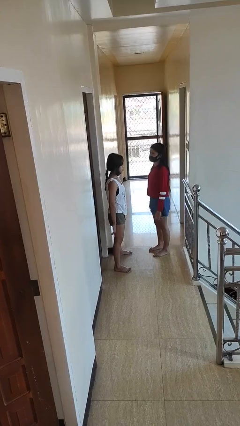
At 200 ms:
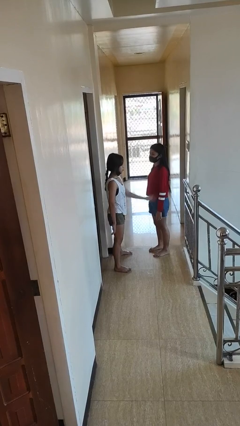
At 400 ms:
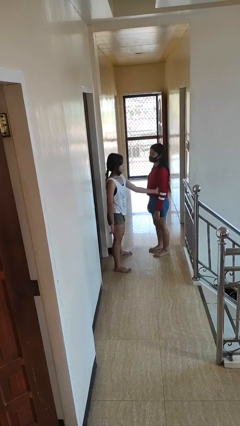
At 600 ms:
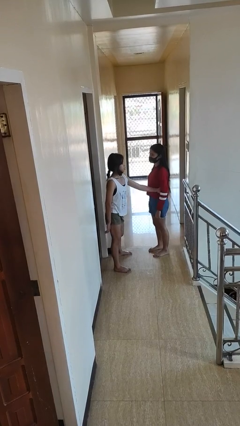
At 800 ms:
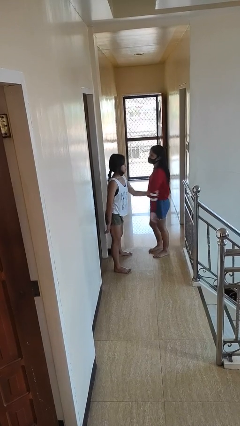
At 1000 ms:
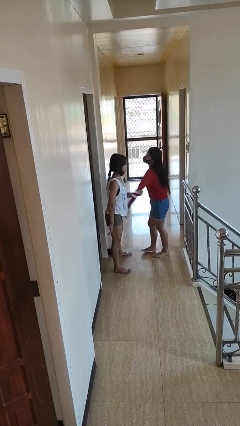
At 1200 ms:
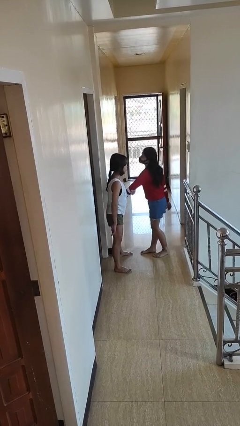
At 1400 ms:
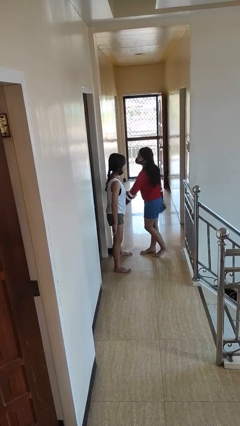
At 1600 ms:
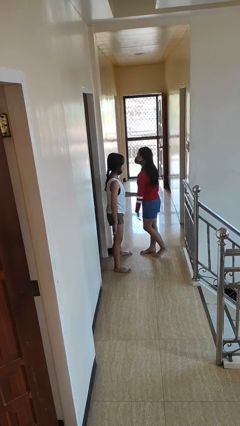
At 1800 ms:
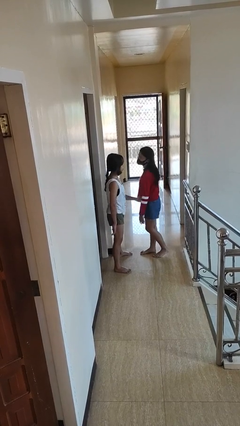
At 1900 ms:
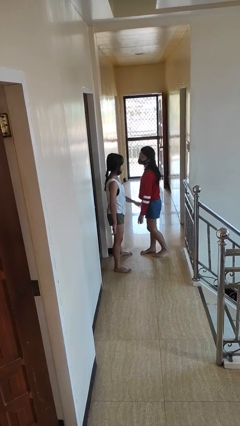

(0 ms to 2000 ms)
person grabs person by forearm

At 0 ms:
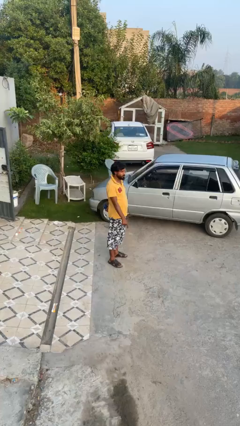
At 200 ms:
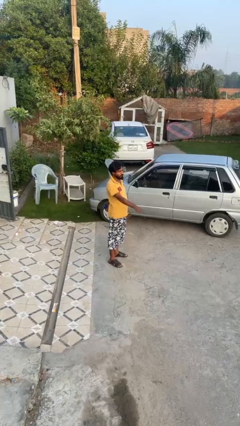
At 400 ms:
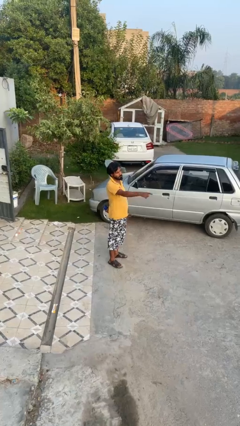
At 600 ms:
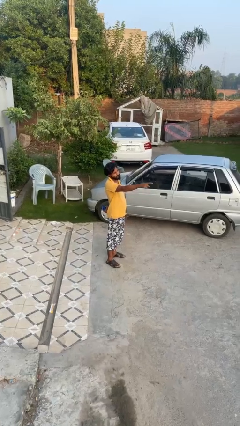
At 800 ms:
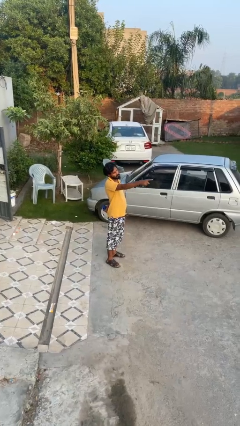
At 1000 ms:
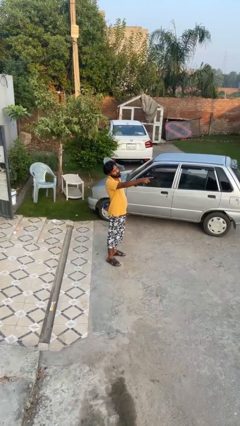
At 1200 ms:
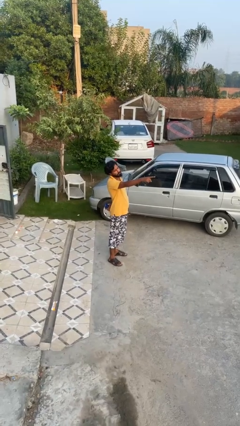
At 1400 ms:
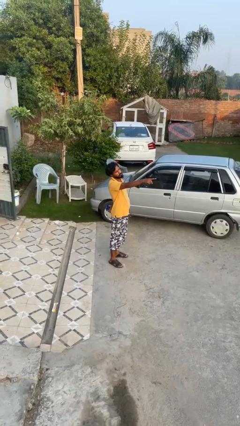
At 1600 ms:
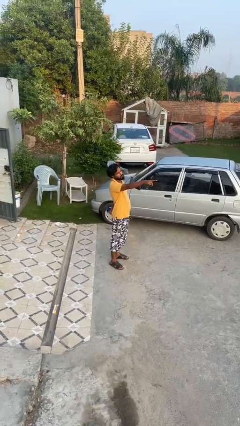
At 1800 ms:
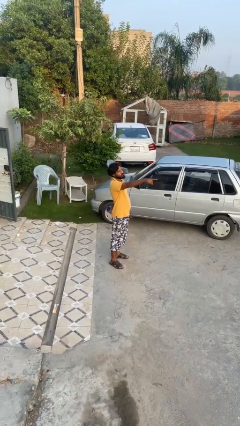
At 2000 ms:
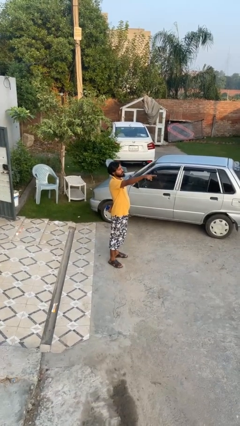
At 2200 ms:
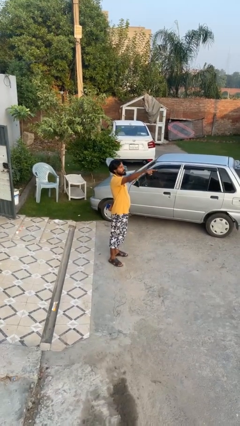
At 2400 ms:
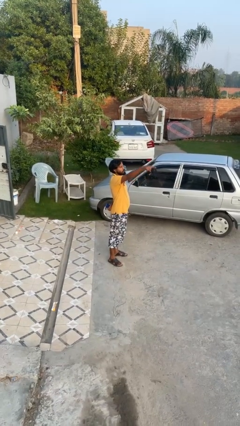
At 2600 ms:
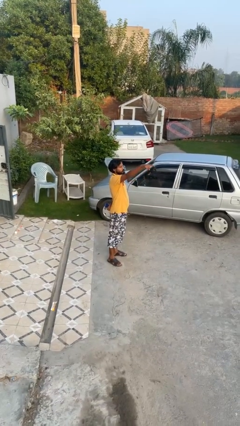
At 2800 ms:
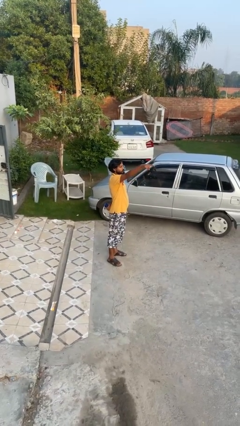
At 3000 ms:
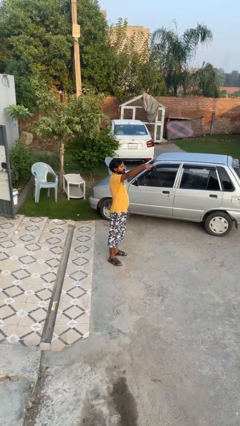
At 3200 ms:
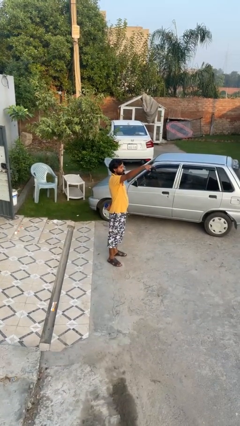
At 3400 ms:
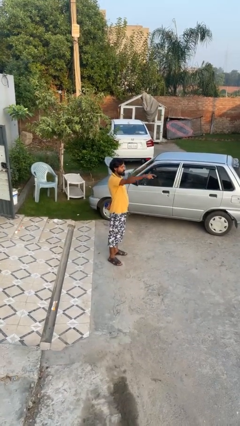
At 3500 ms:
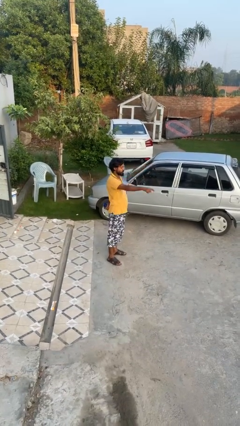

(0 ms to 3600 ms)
person points at person

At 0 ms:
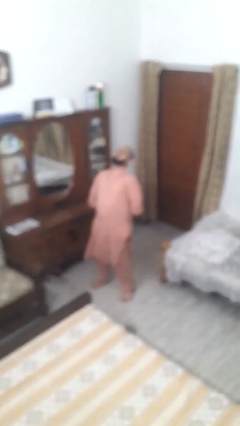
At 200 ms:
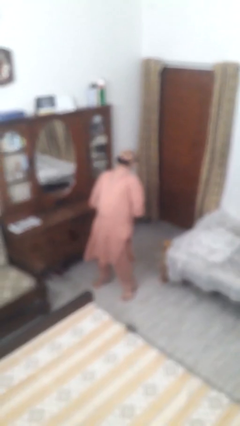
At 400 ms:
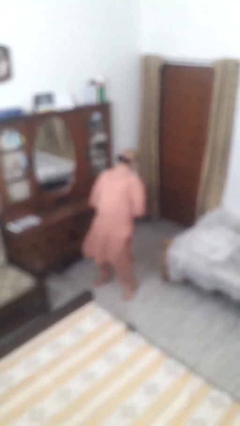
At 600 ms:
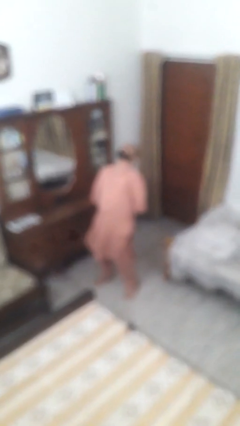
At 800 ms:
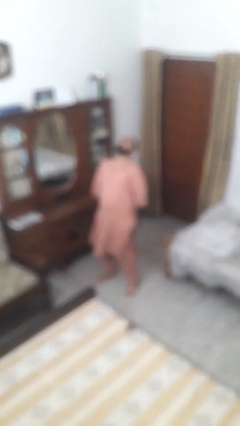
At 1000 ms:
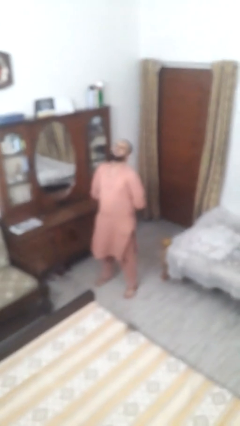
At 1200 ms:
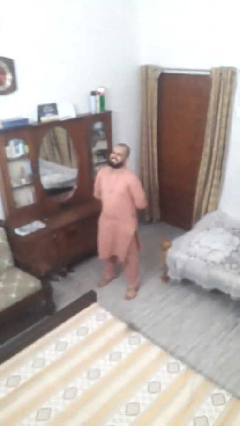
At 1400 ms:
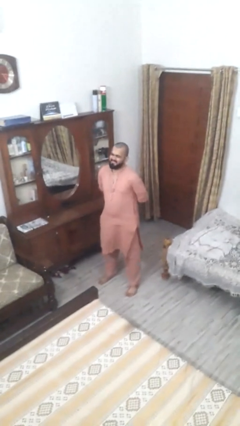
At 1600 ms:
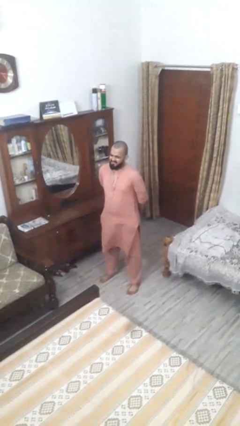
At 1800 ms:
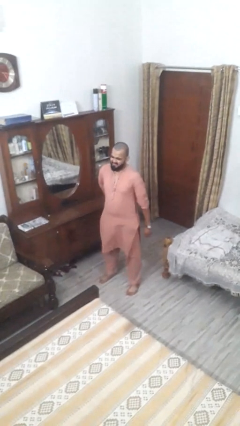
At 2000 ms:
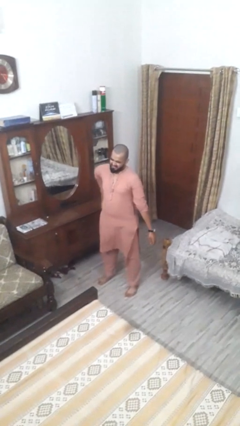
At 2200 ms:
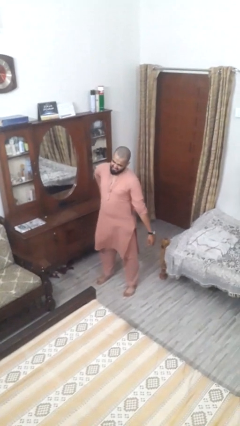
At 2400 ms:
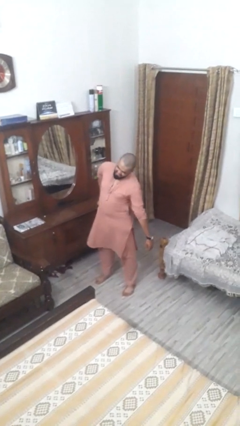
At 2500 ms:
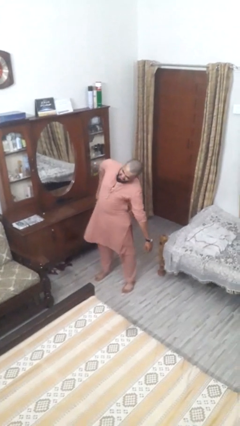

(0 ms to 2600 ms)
person stretches back

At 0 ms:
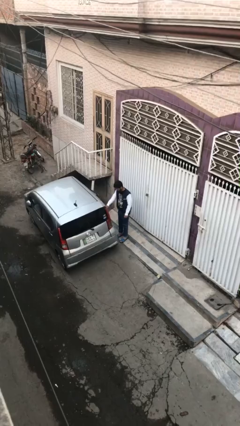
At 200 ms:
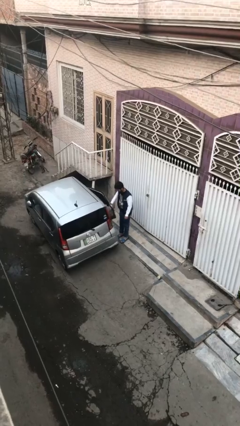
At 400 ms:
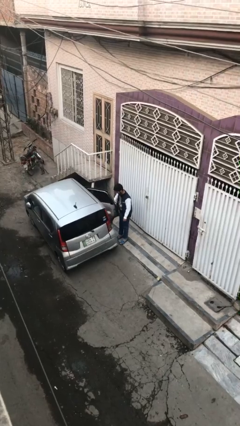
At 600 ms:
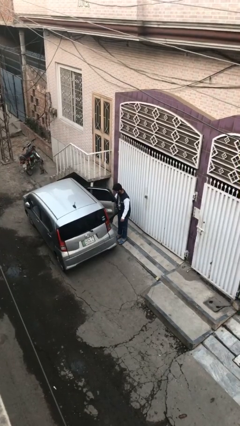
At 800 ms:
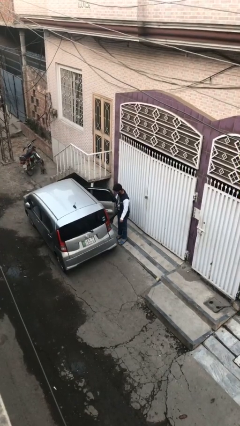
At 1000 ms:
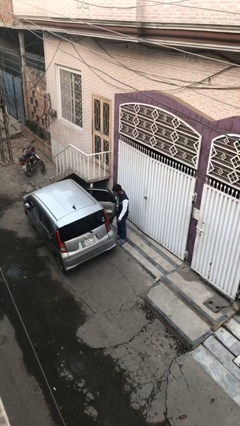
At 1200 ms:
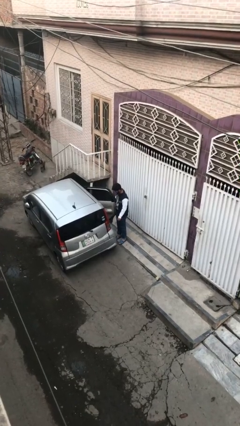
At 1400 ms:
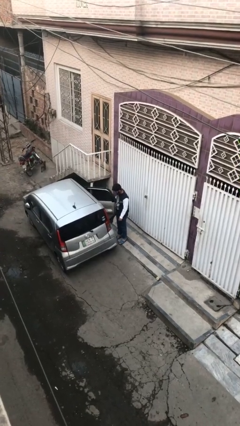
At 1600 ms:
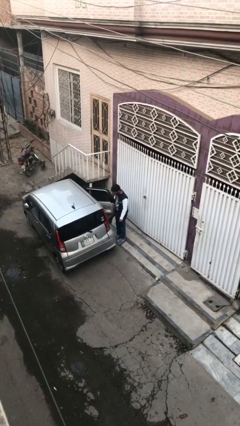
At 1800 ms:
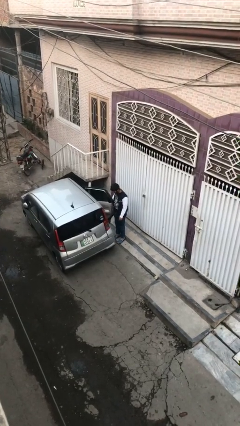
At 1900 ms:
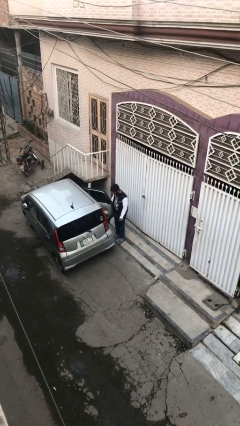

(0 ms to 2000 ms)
person opens car door

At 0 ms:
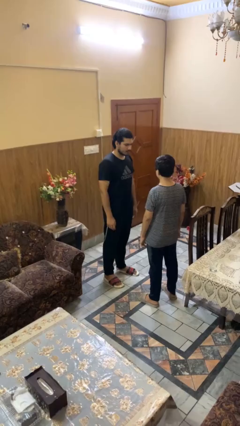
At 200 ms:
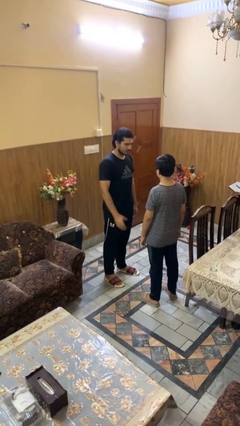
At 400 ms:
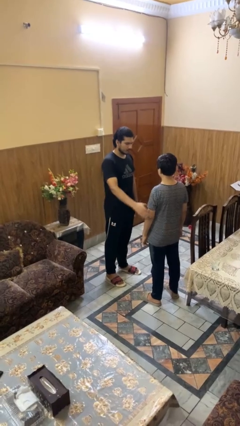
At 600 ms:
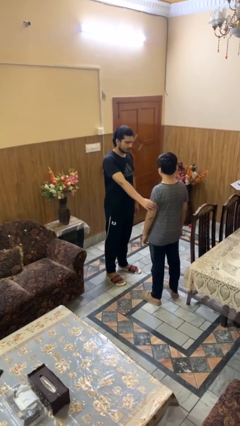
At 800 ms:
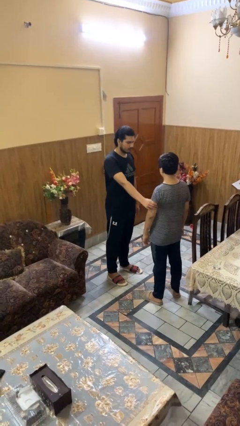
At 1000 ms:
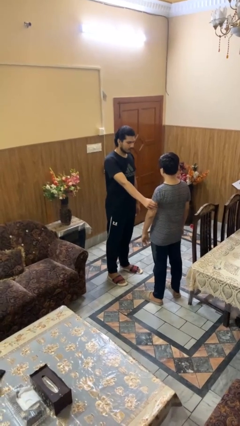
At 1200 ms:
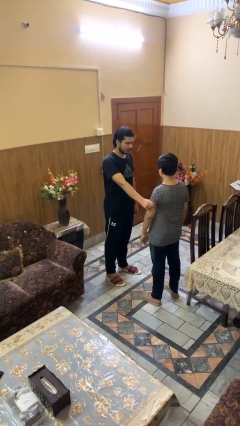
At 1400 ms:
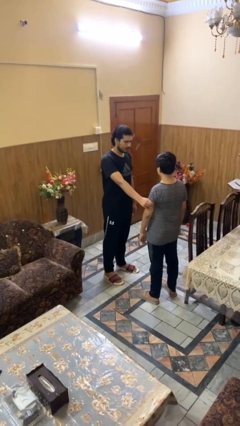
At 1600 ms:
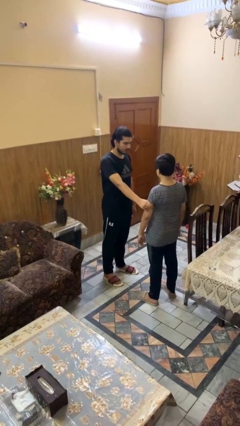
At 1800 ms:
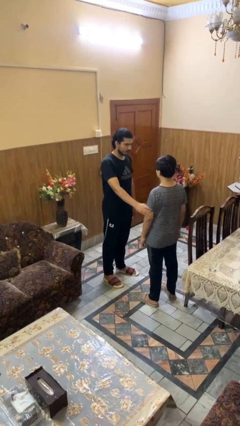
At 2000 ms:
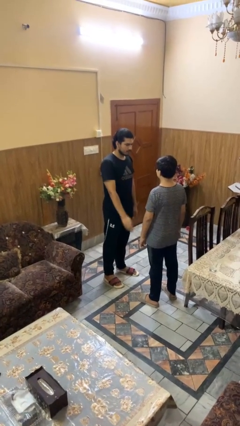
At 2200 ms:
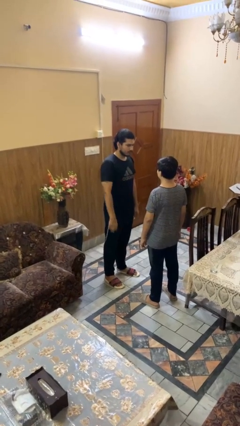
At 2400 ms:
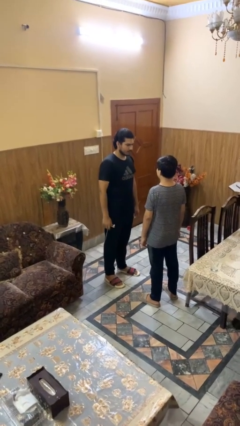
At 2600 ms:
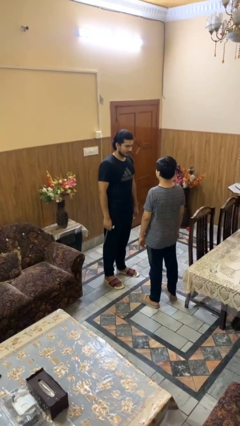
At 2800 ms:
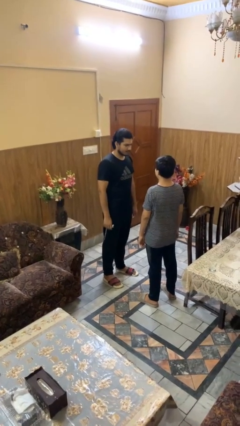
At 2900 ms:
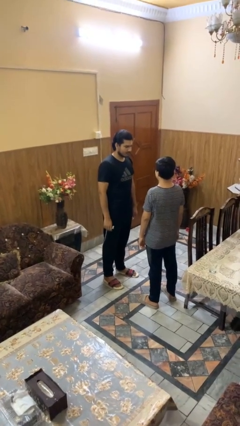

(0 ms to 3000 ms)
person grabs person by bicep

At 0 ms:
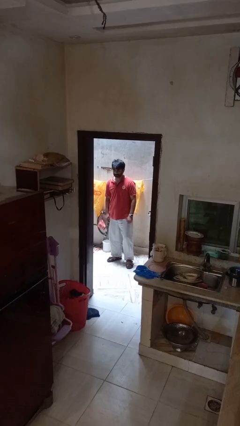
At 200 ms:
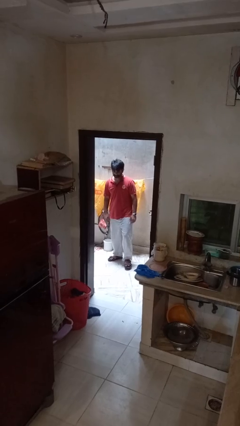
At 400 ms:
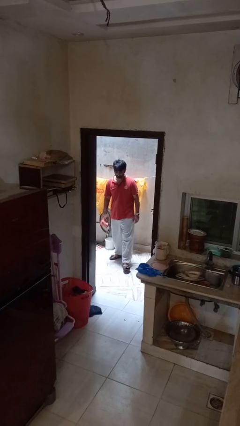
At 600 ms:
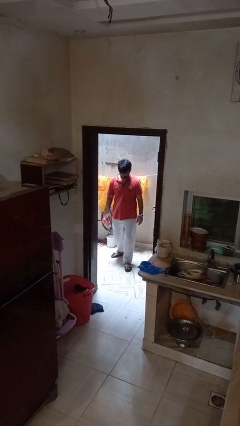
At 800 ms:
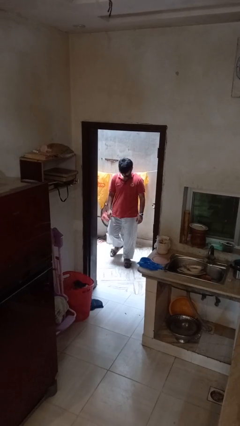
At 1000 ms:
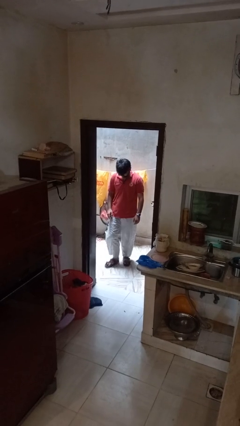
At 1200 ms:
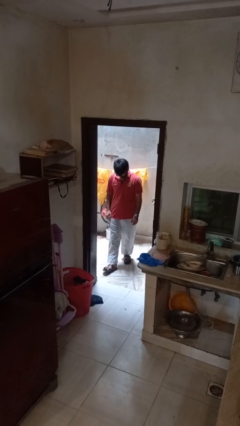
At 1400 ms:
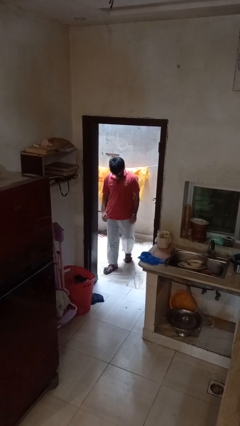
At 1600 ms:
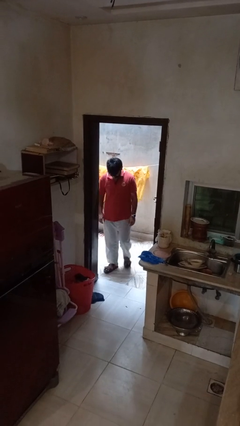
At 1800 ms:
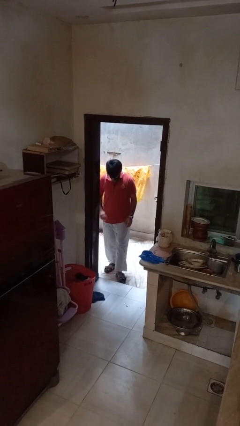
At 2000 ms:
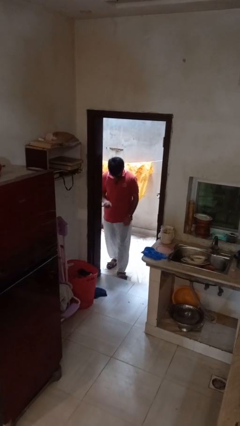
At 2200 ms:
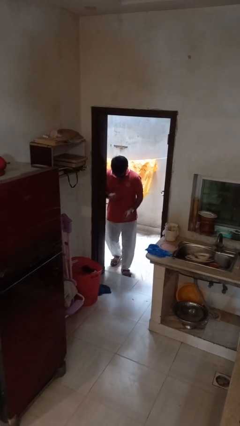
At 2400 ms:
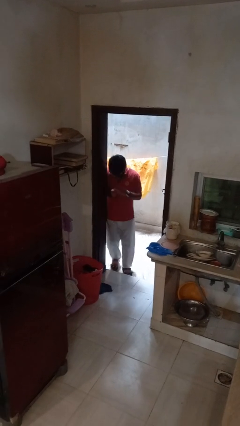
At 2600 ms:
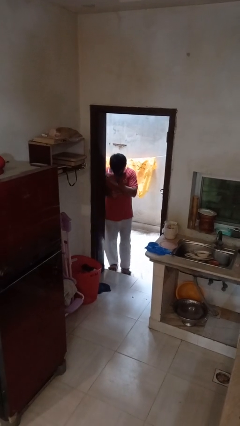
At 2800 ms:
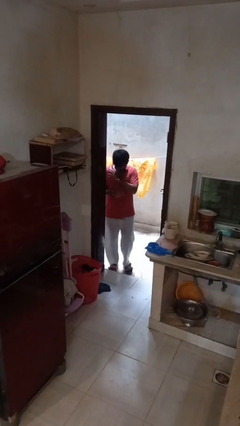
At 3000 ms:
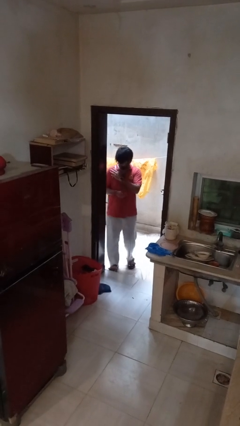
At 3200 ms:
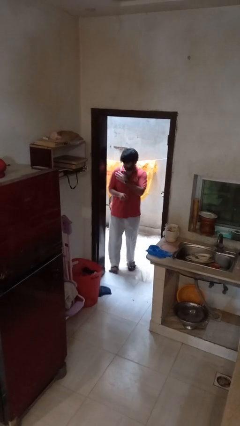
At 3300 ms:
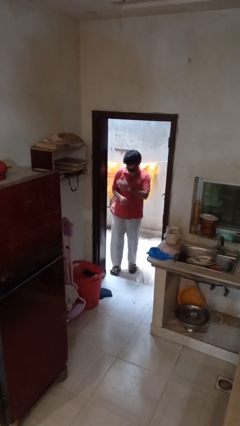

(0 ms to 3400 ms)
person bumps into wall

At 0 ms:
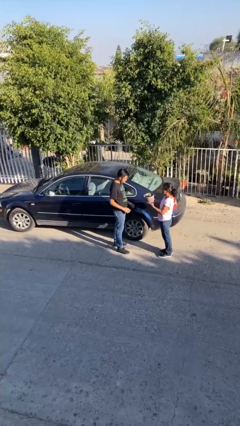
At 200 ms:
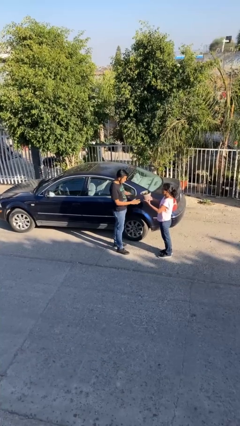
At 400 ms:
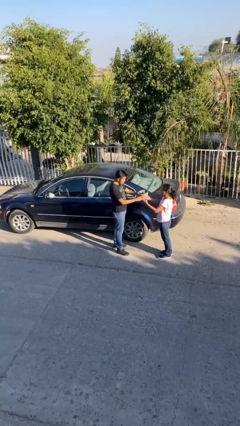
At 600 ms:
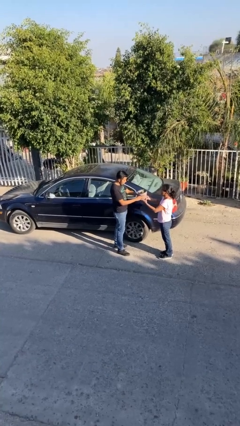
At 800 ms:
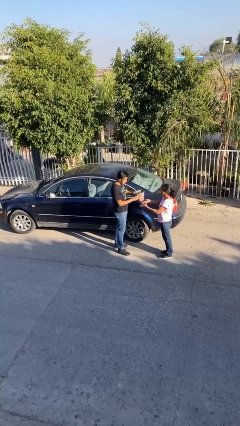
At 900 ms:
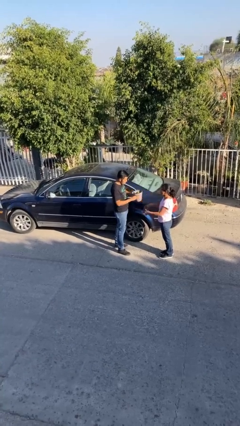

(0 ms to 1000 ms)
person transfers object to person
